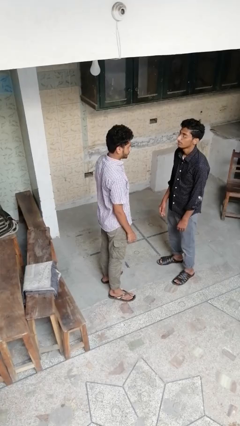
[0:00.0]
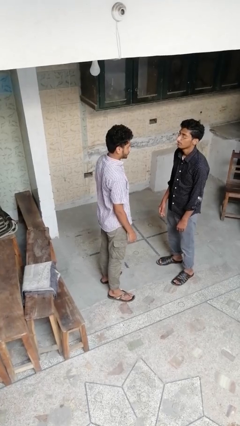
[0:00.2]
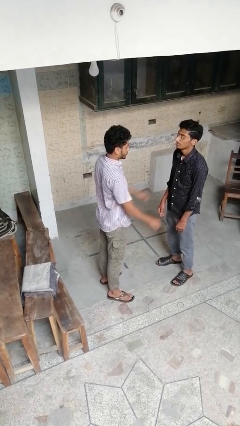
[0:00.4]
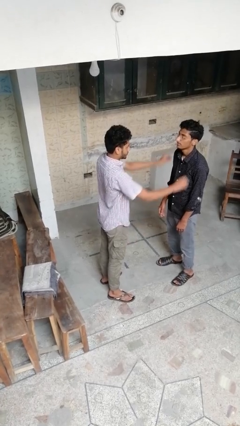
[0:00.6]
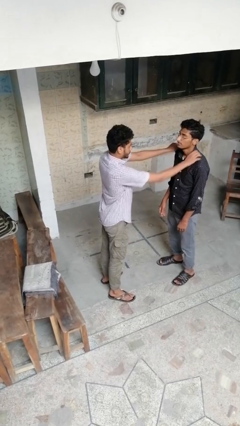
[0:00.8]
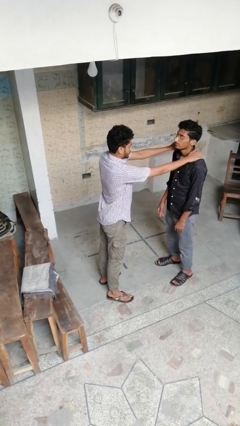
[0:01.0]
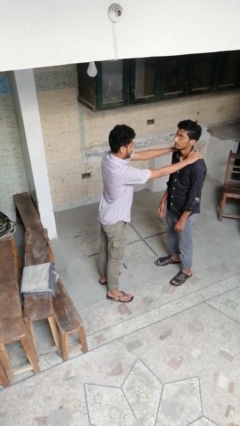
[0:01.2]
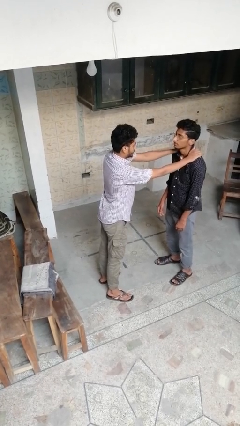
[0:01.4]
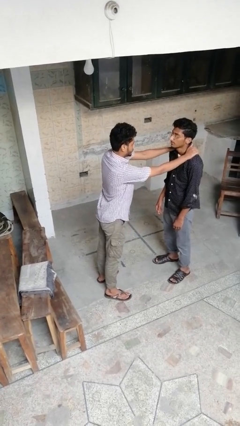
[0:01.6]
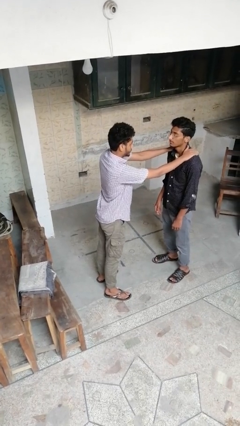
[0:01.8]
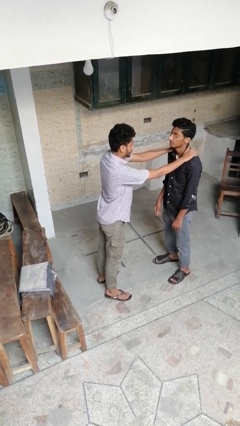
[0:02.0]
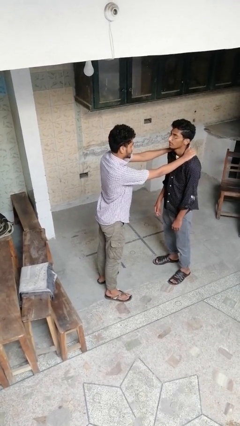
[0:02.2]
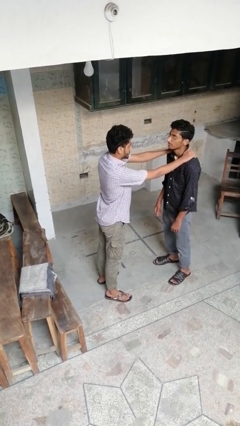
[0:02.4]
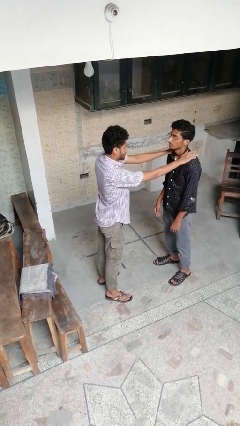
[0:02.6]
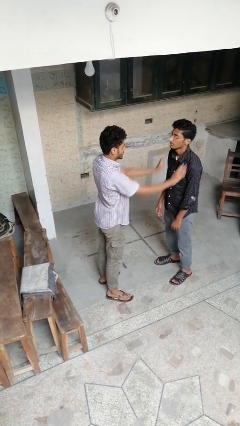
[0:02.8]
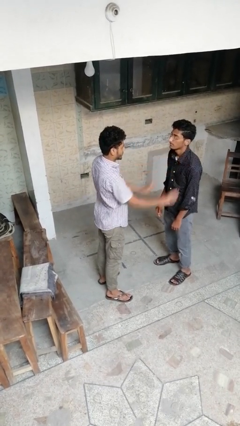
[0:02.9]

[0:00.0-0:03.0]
person pounds shoulders of person

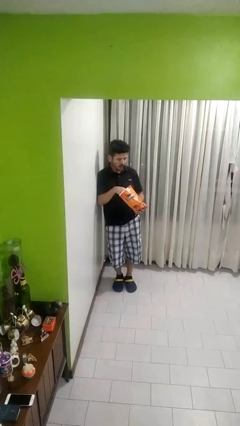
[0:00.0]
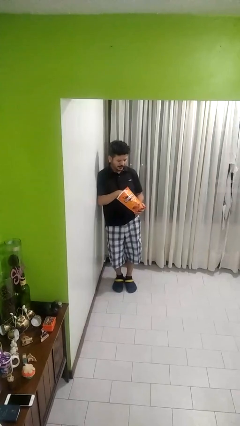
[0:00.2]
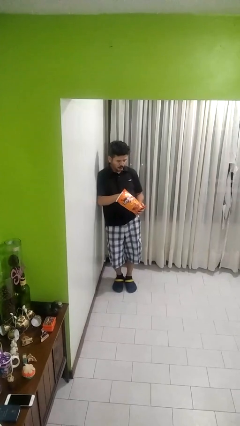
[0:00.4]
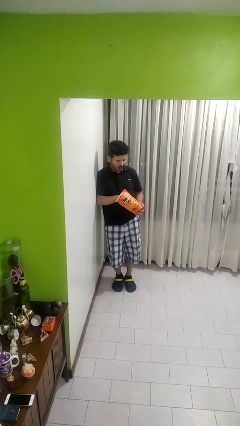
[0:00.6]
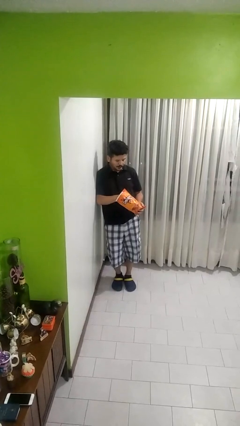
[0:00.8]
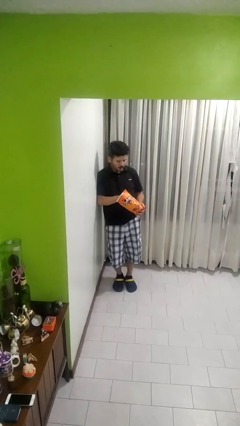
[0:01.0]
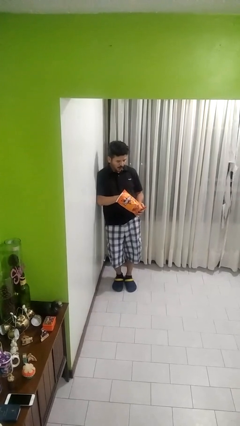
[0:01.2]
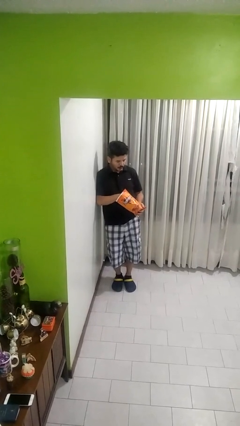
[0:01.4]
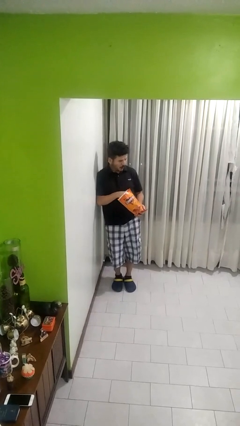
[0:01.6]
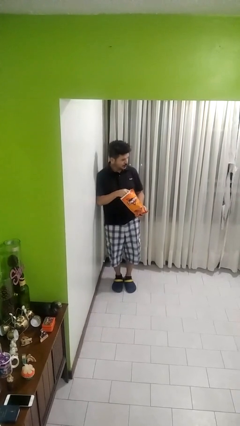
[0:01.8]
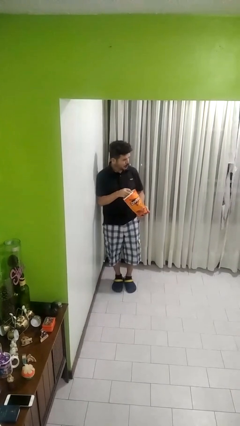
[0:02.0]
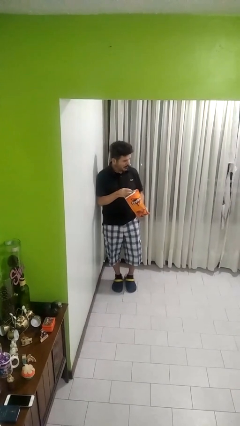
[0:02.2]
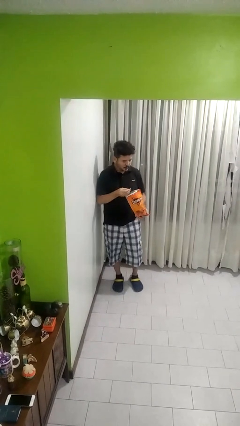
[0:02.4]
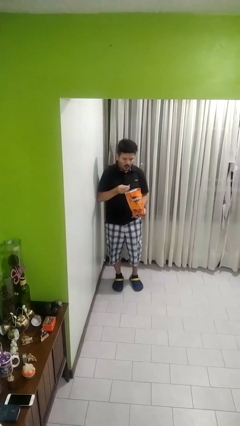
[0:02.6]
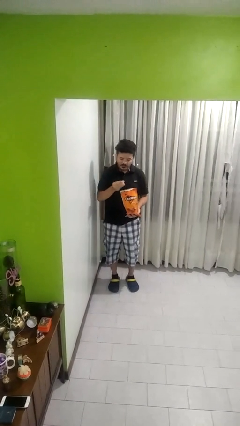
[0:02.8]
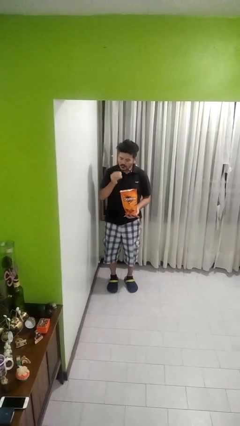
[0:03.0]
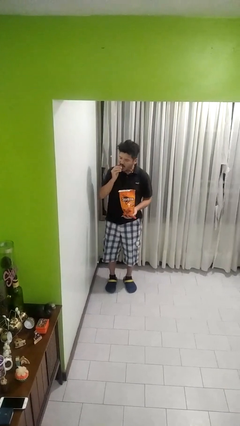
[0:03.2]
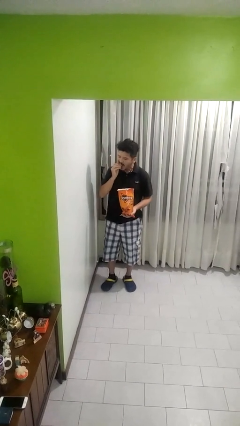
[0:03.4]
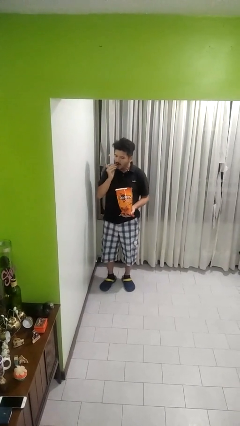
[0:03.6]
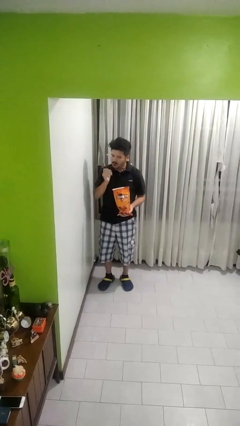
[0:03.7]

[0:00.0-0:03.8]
person eats snack from bag

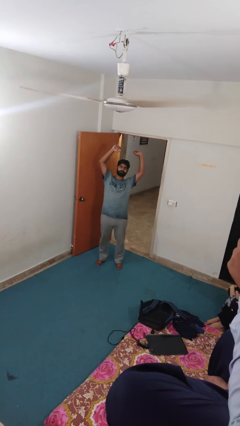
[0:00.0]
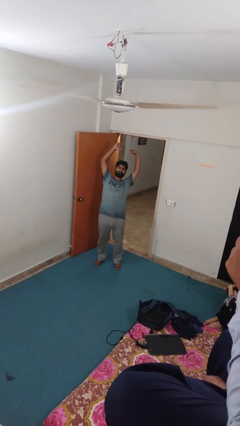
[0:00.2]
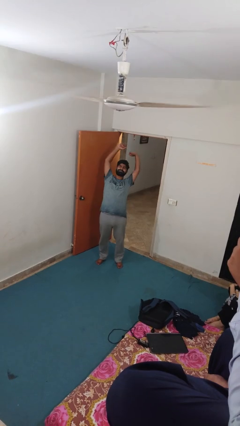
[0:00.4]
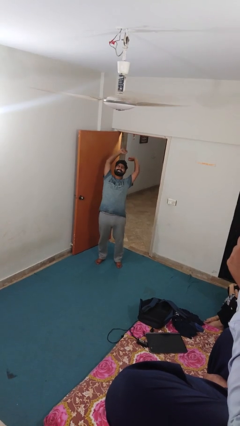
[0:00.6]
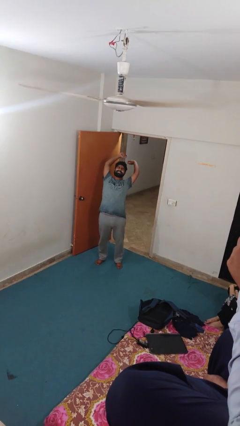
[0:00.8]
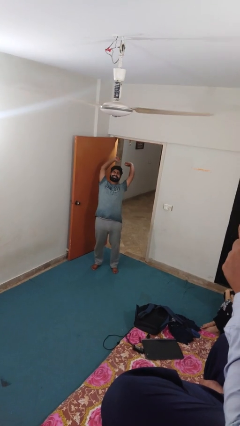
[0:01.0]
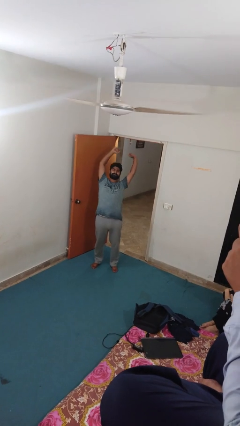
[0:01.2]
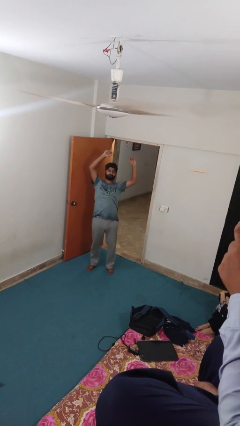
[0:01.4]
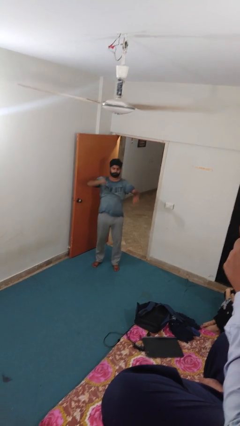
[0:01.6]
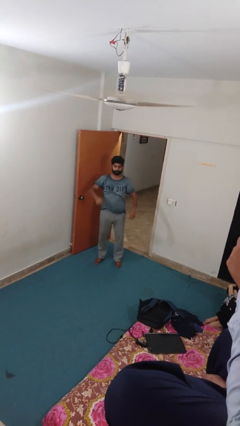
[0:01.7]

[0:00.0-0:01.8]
person stretches arms over head

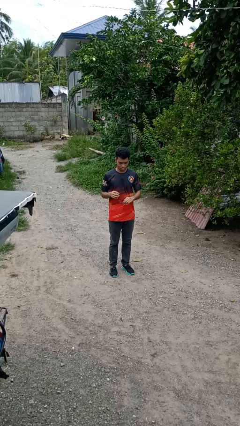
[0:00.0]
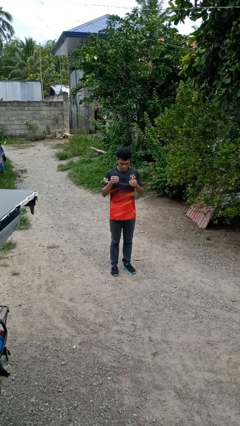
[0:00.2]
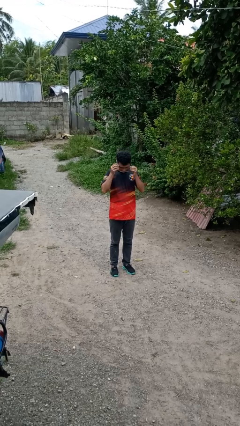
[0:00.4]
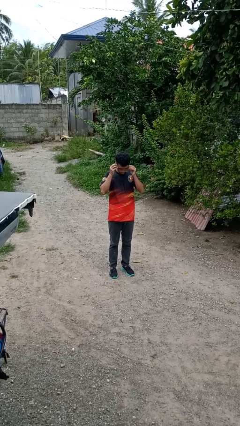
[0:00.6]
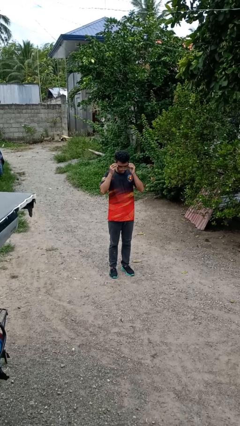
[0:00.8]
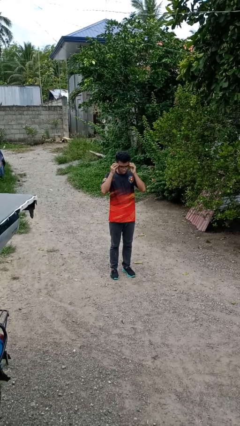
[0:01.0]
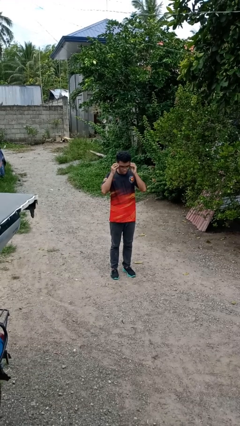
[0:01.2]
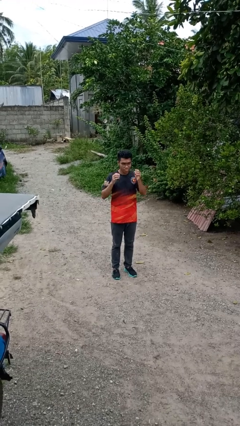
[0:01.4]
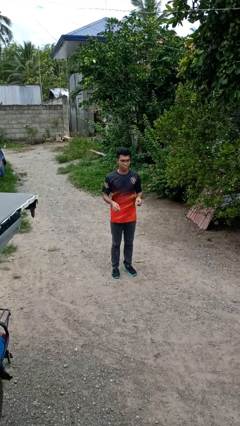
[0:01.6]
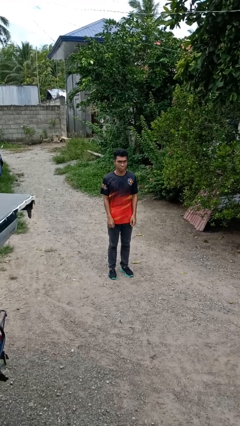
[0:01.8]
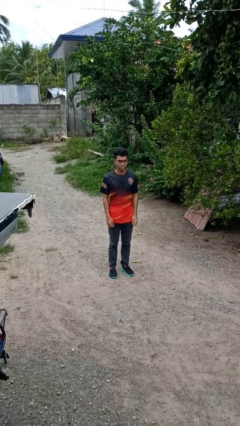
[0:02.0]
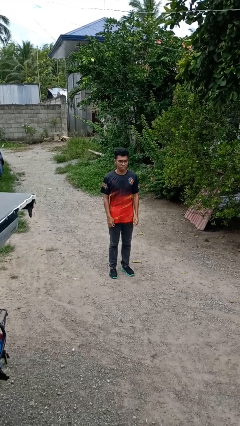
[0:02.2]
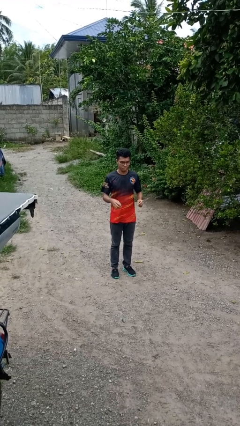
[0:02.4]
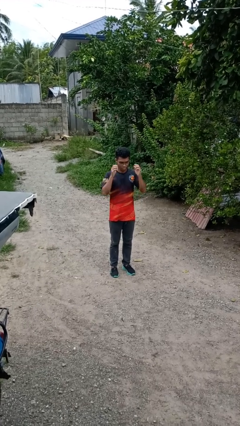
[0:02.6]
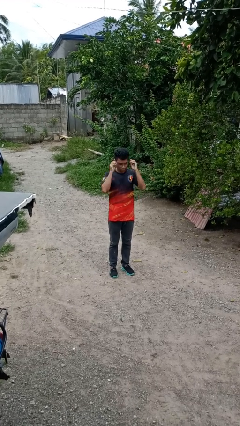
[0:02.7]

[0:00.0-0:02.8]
person puts on glasses

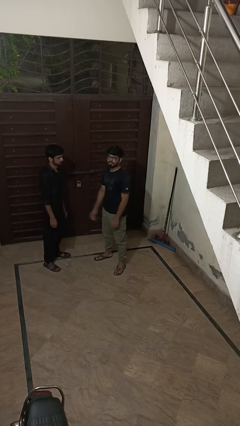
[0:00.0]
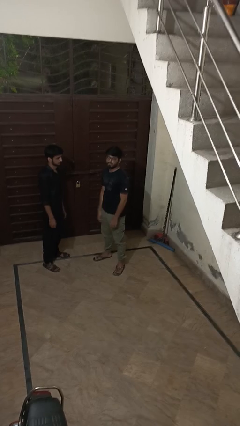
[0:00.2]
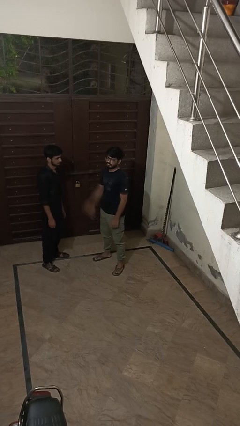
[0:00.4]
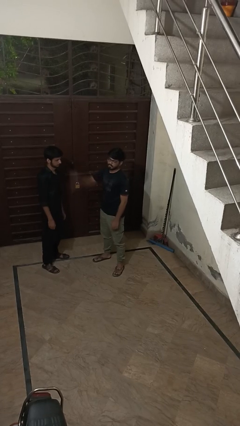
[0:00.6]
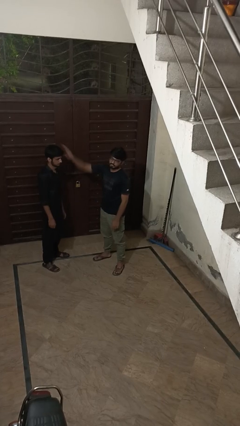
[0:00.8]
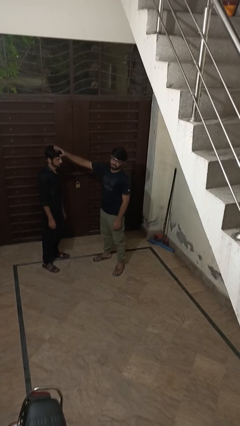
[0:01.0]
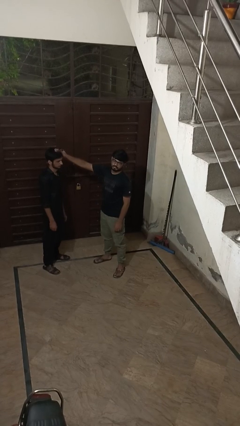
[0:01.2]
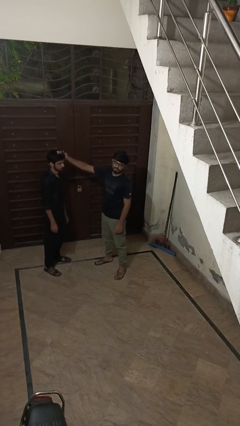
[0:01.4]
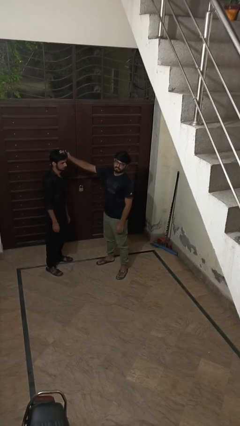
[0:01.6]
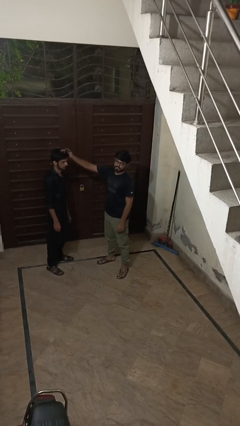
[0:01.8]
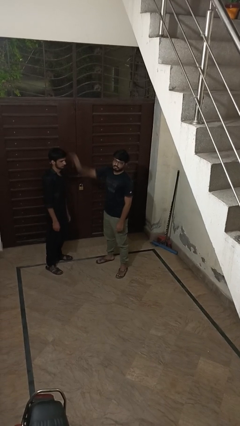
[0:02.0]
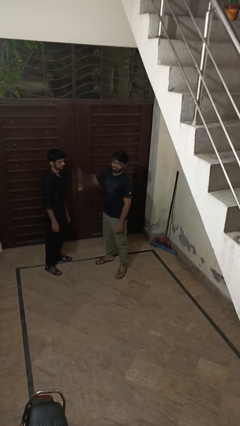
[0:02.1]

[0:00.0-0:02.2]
person grabs person by hair

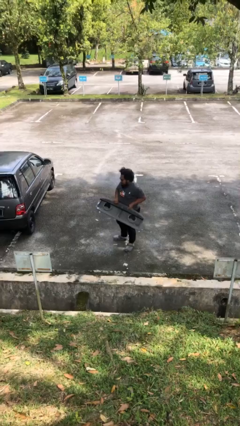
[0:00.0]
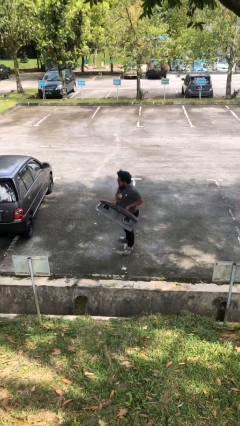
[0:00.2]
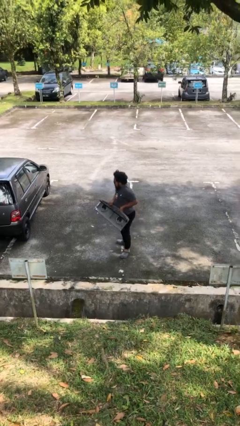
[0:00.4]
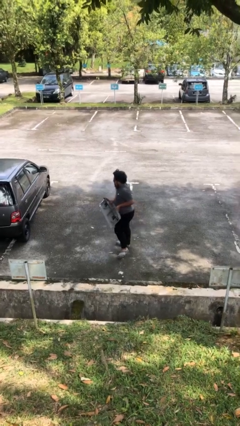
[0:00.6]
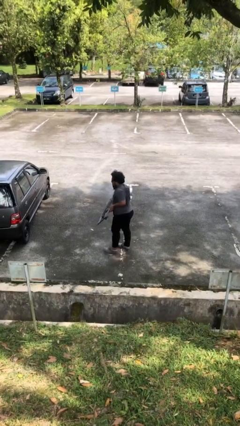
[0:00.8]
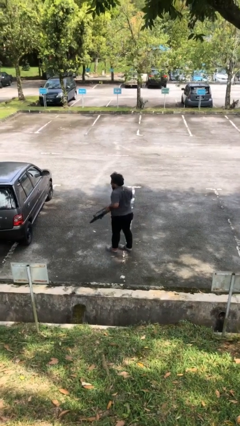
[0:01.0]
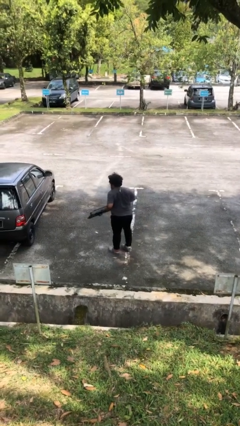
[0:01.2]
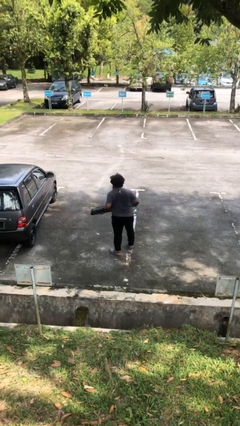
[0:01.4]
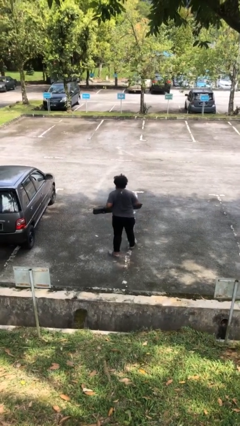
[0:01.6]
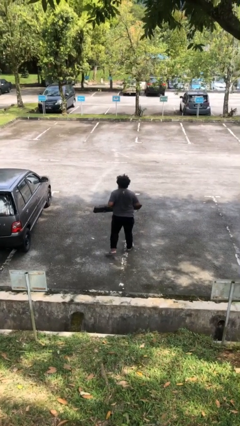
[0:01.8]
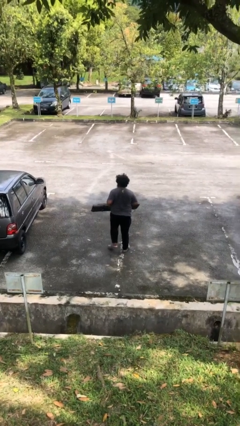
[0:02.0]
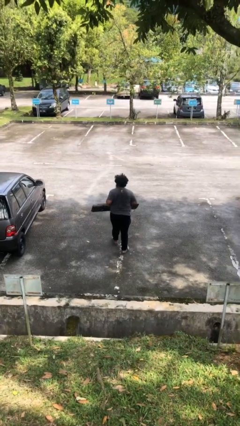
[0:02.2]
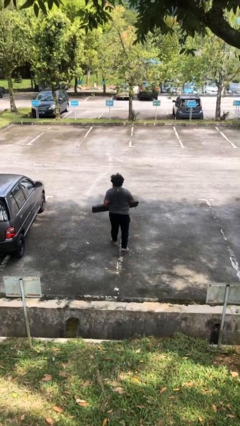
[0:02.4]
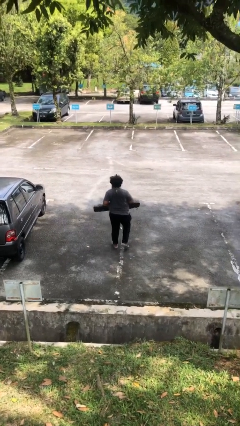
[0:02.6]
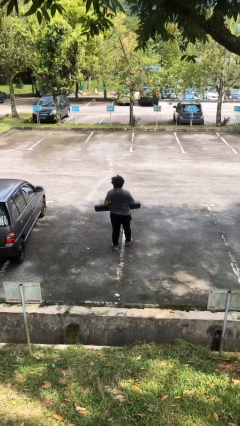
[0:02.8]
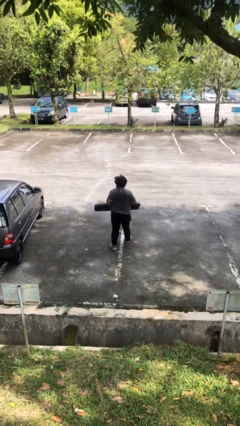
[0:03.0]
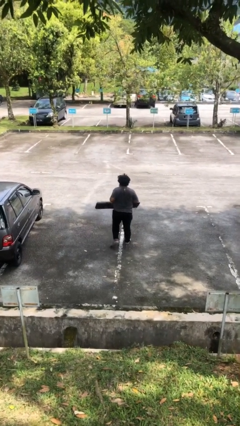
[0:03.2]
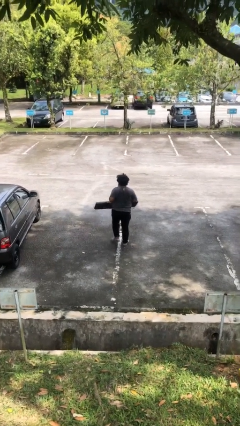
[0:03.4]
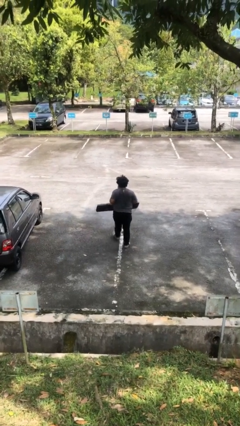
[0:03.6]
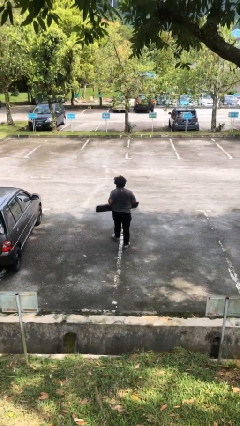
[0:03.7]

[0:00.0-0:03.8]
person carries heavy object
